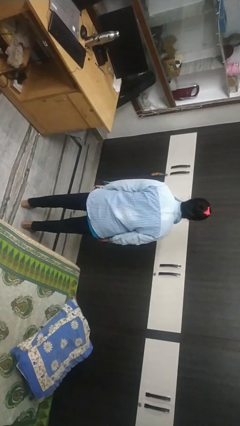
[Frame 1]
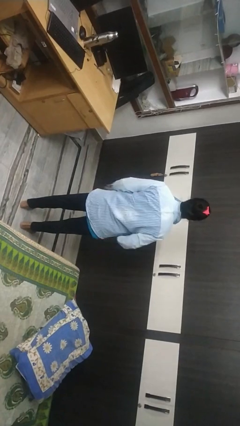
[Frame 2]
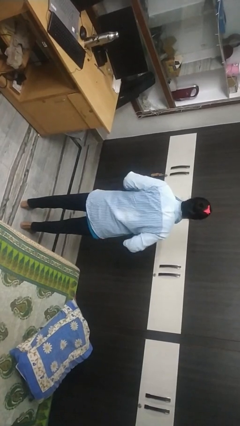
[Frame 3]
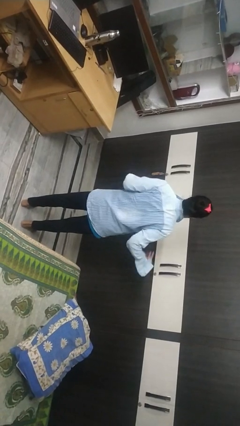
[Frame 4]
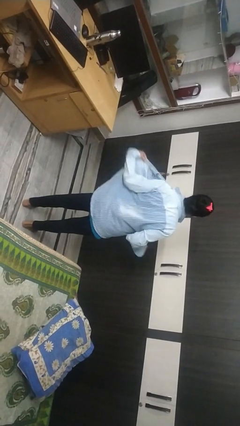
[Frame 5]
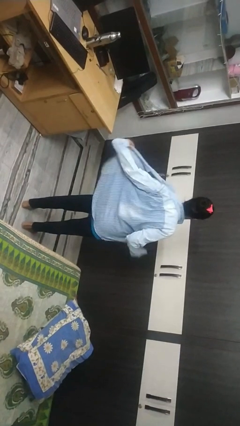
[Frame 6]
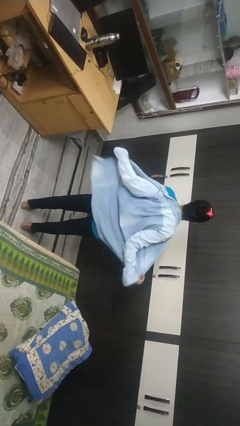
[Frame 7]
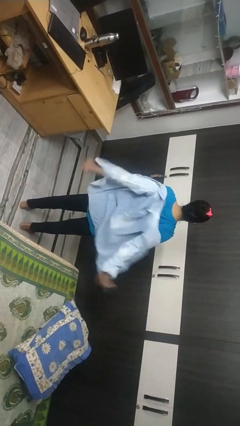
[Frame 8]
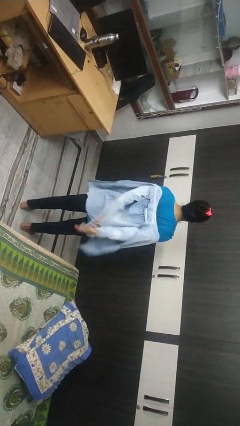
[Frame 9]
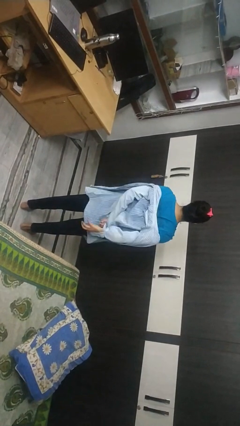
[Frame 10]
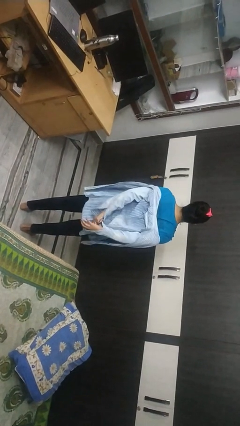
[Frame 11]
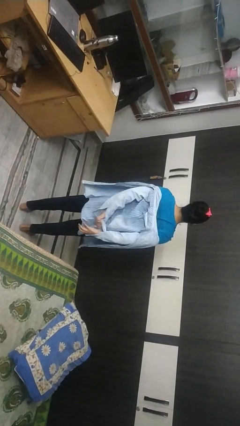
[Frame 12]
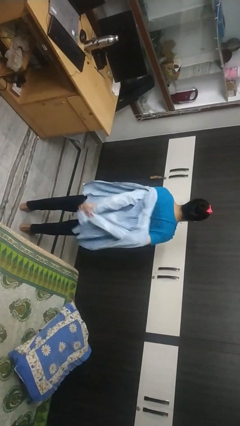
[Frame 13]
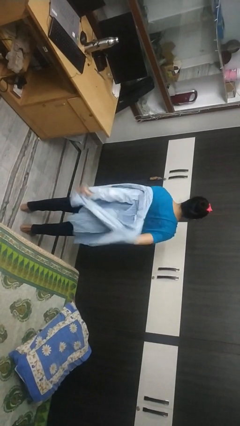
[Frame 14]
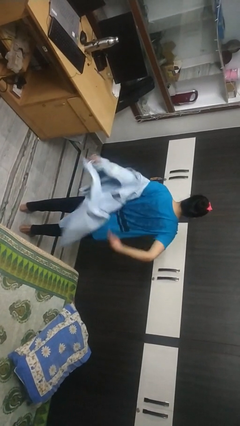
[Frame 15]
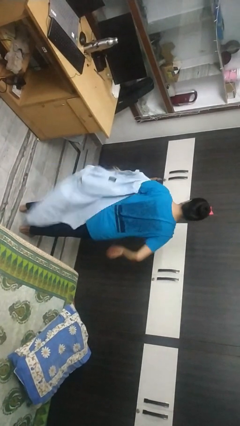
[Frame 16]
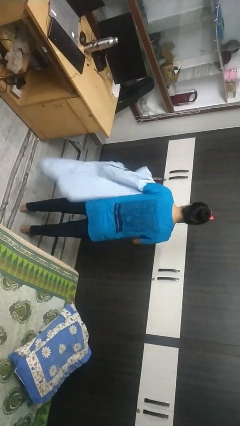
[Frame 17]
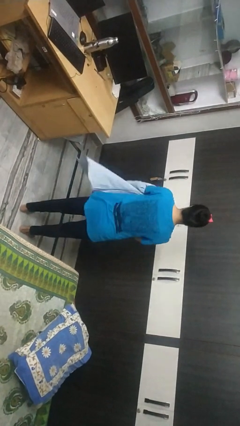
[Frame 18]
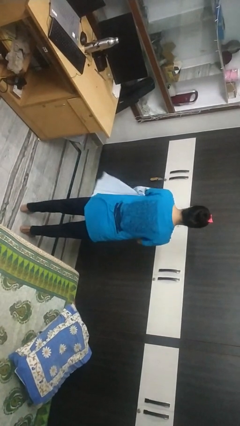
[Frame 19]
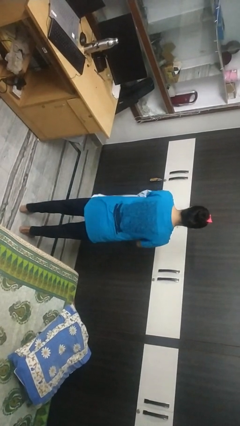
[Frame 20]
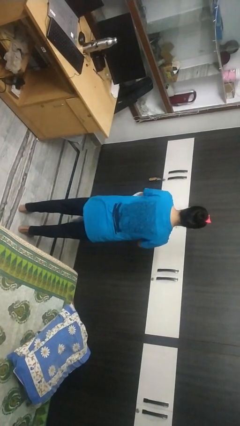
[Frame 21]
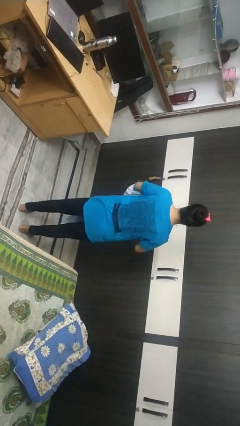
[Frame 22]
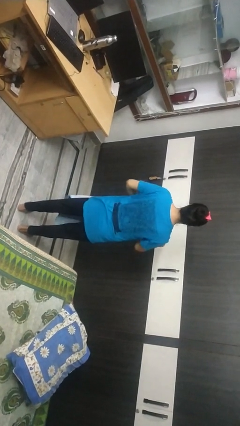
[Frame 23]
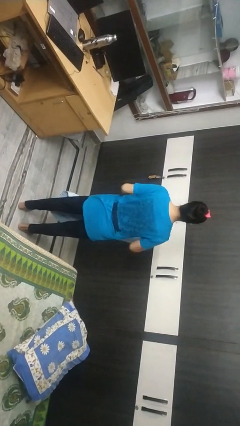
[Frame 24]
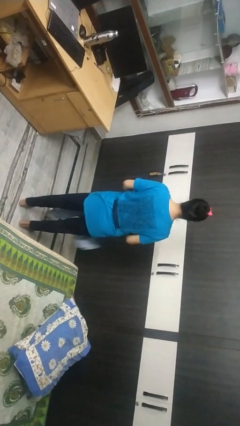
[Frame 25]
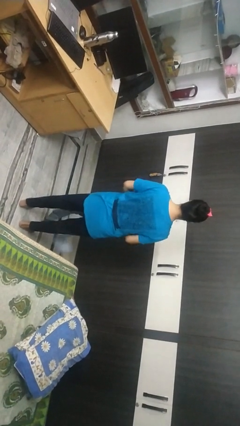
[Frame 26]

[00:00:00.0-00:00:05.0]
person takes off shirt

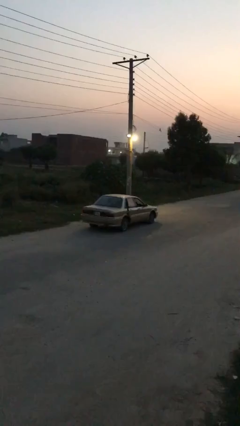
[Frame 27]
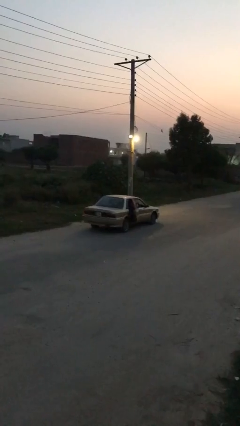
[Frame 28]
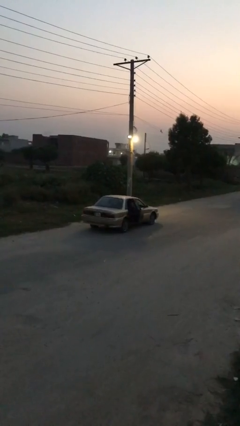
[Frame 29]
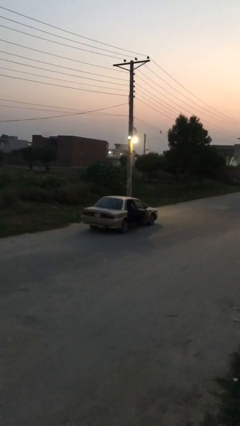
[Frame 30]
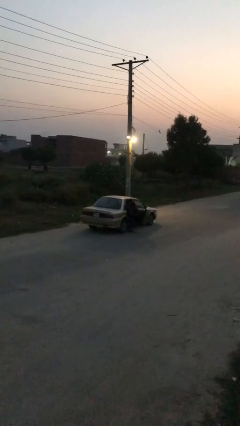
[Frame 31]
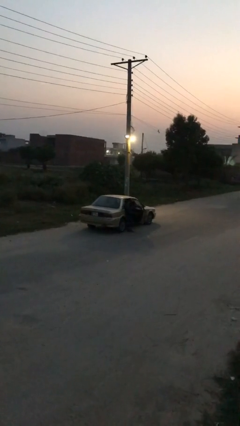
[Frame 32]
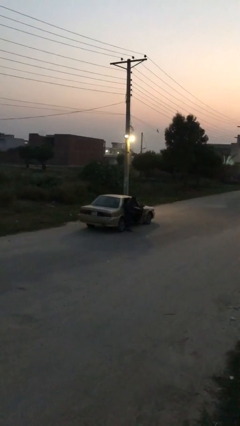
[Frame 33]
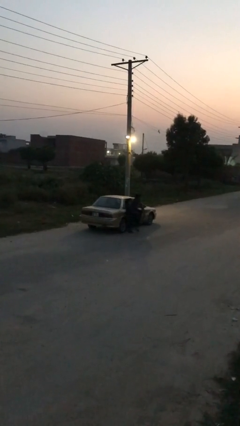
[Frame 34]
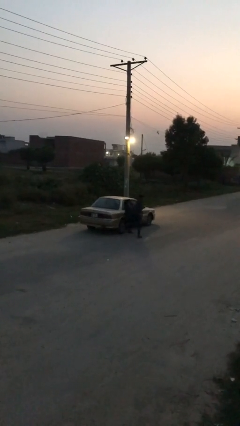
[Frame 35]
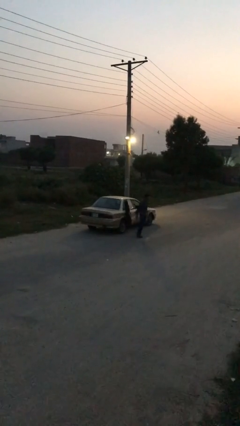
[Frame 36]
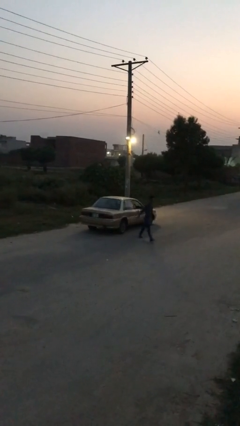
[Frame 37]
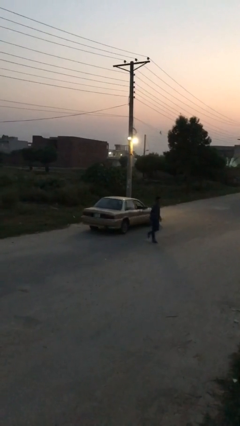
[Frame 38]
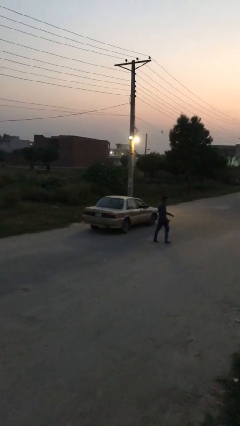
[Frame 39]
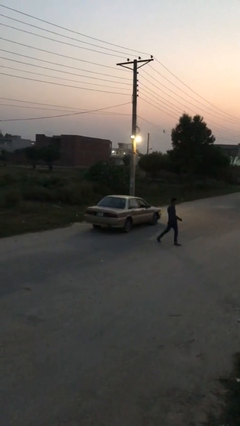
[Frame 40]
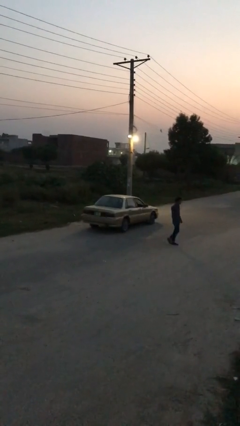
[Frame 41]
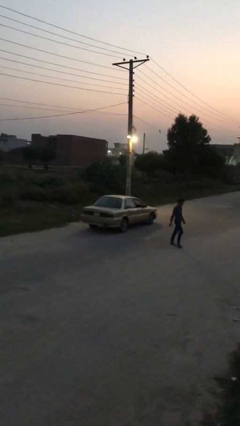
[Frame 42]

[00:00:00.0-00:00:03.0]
car drops off person

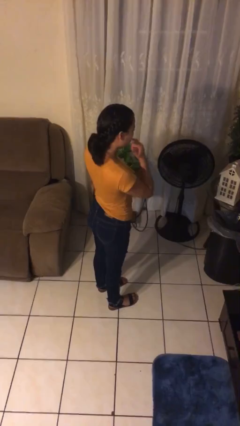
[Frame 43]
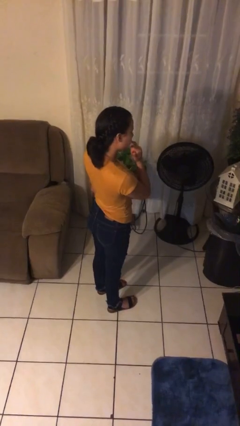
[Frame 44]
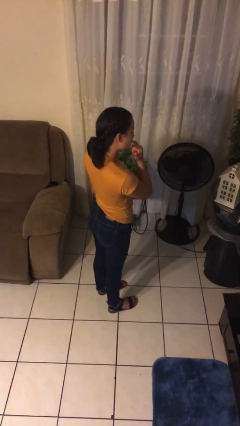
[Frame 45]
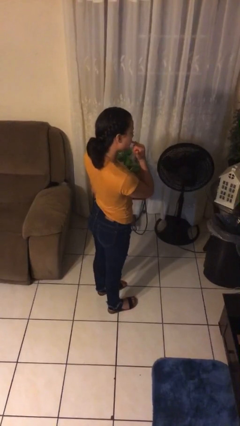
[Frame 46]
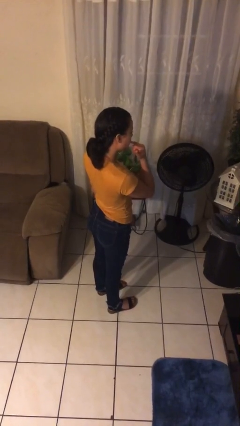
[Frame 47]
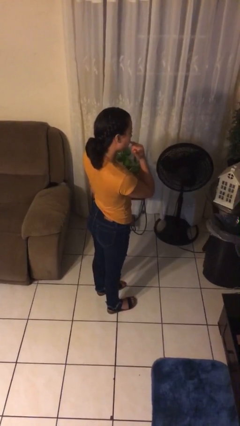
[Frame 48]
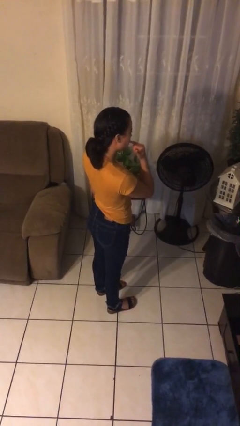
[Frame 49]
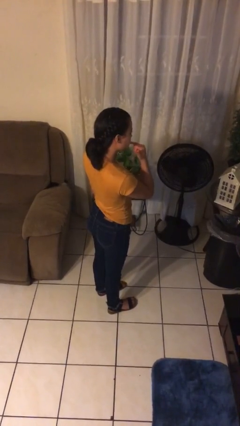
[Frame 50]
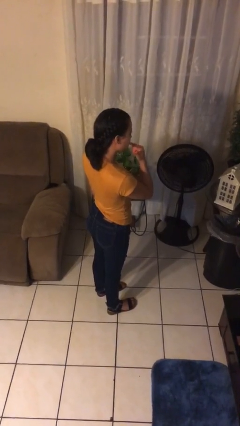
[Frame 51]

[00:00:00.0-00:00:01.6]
person licks fingers

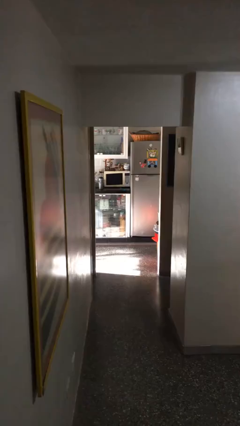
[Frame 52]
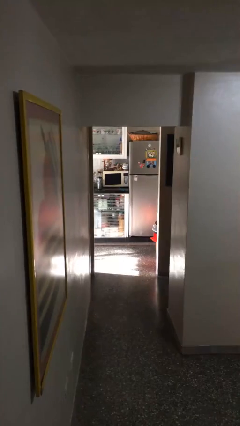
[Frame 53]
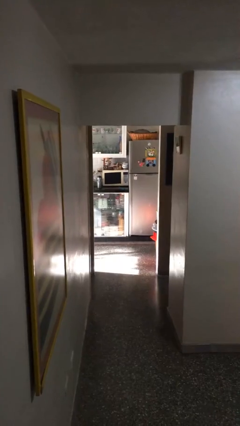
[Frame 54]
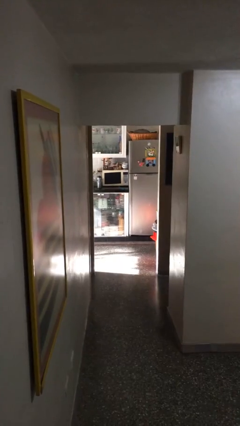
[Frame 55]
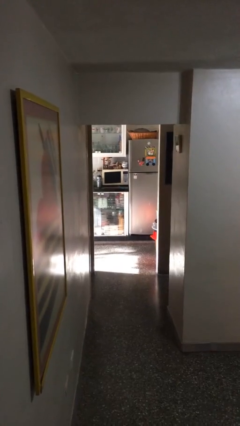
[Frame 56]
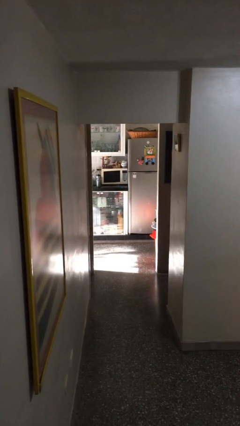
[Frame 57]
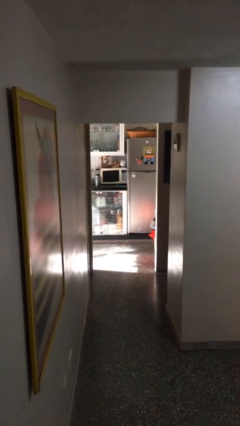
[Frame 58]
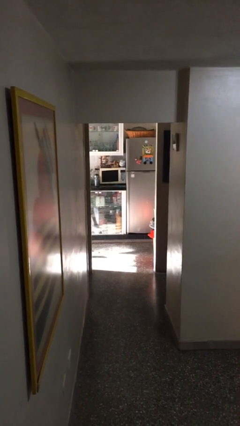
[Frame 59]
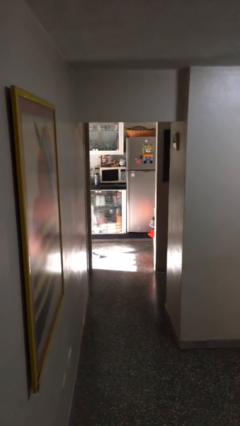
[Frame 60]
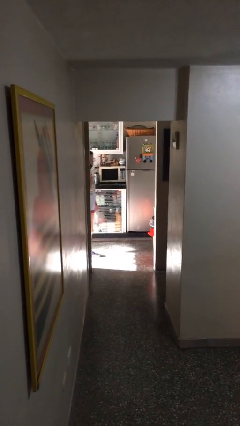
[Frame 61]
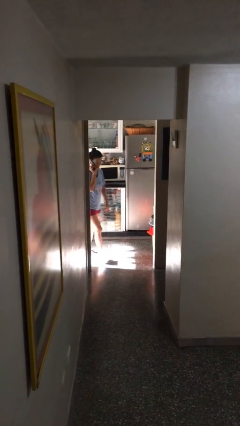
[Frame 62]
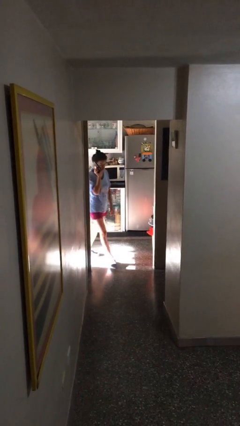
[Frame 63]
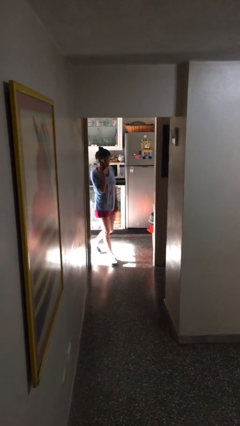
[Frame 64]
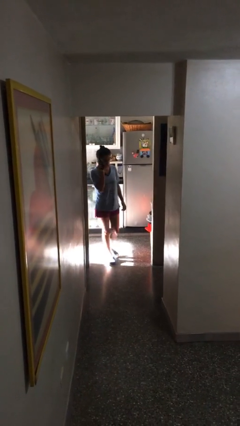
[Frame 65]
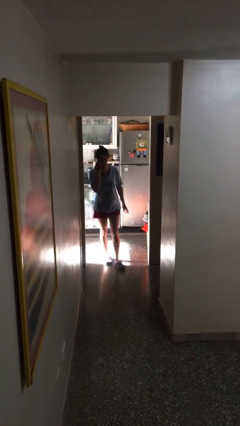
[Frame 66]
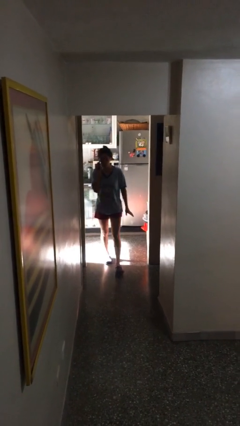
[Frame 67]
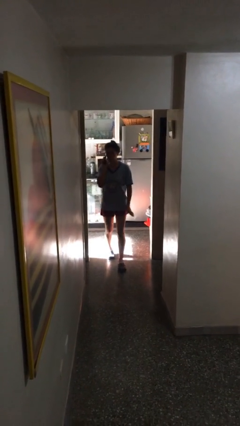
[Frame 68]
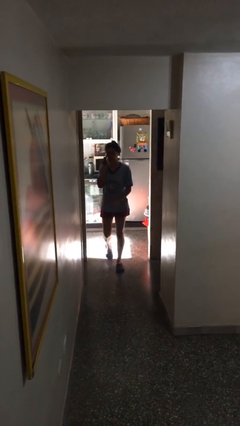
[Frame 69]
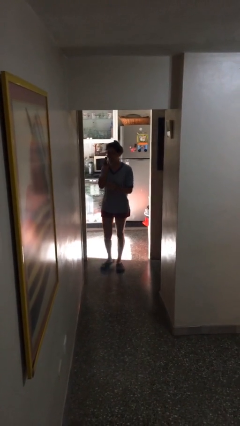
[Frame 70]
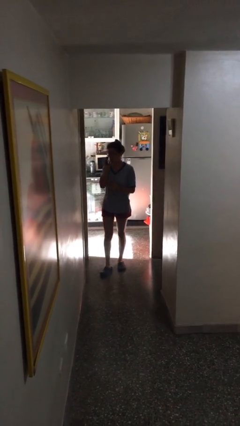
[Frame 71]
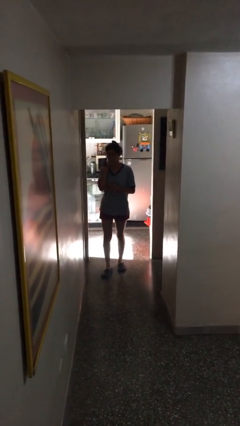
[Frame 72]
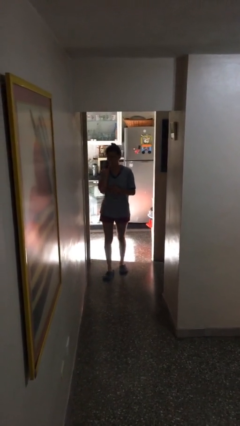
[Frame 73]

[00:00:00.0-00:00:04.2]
person enters scene through structure

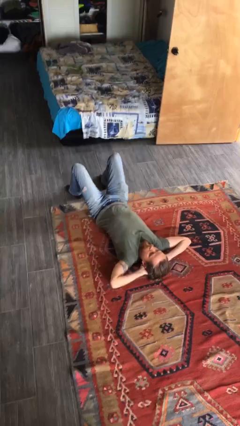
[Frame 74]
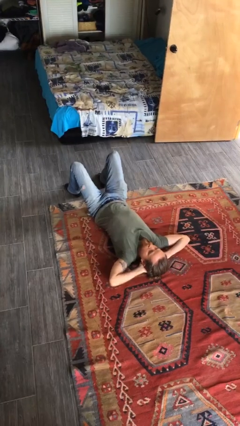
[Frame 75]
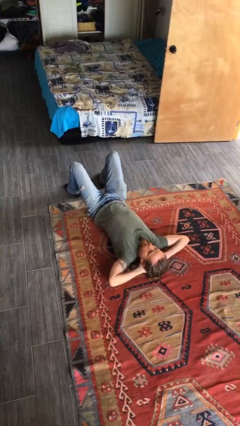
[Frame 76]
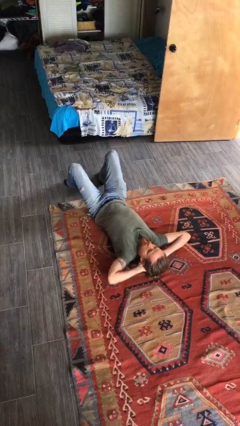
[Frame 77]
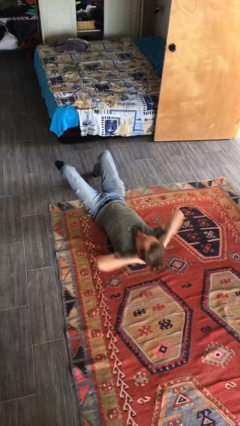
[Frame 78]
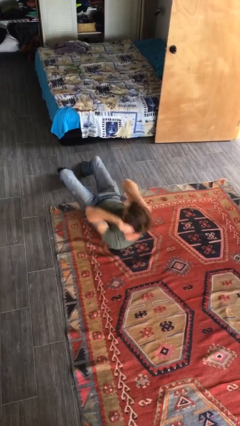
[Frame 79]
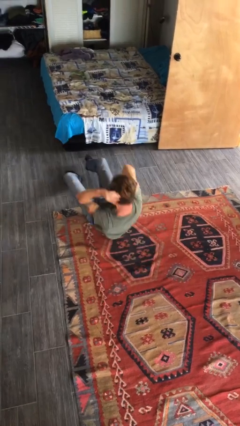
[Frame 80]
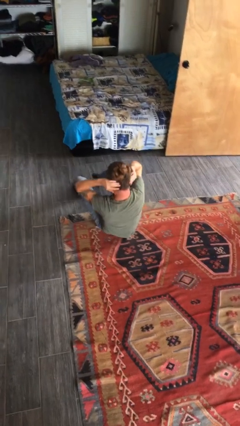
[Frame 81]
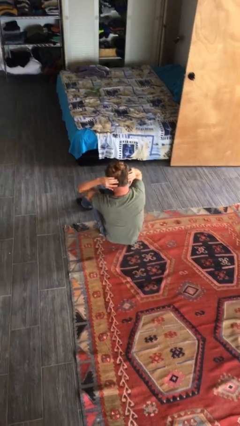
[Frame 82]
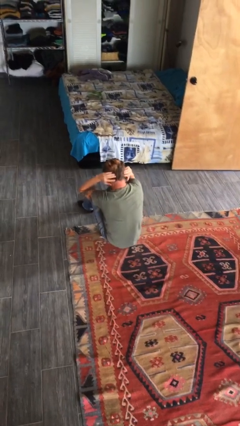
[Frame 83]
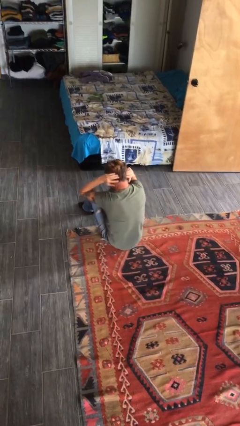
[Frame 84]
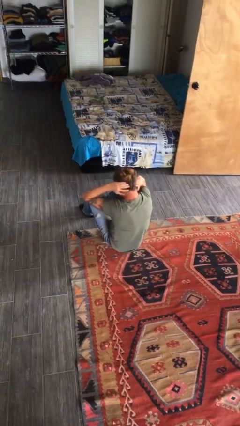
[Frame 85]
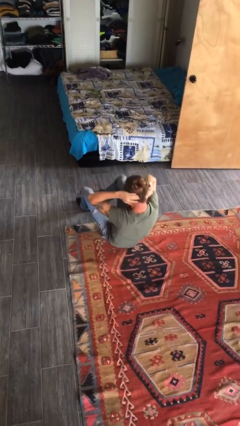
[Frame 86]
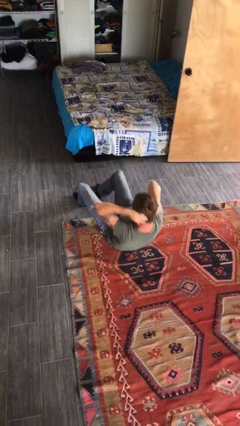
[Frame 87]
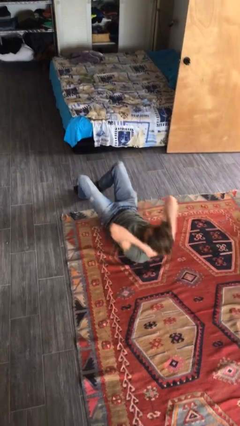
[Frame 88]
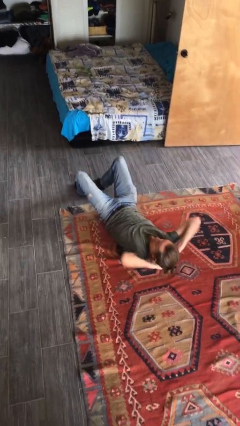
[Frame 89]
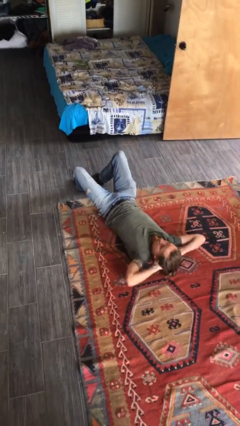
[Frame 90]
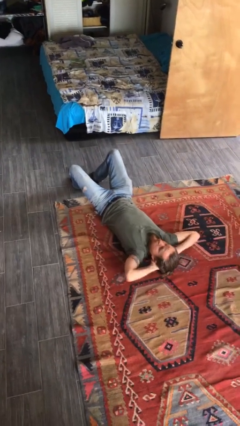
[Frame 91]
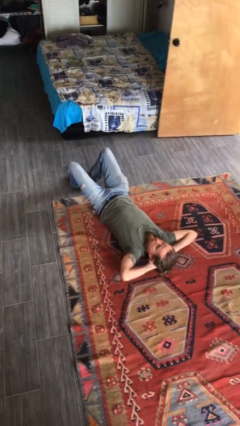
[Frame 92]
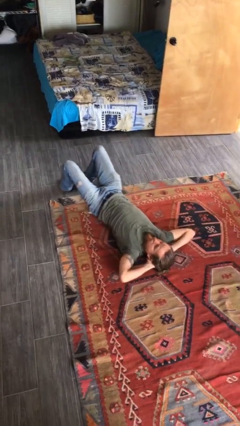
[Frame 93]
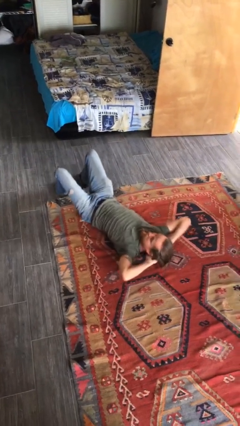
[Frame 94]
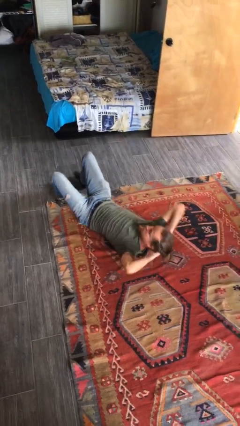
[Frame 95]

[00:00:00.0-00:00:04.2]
person exercises with situp
